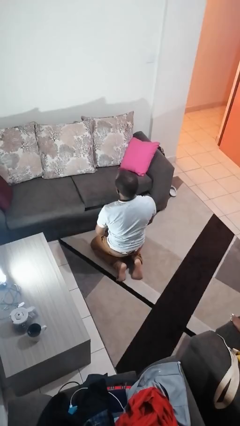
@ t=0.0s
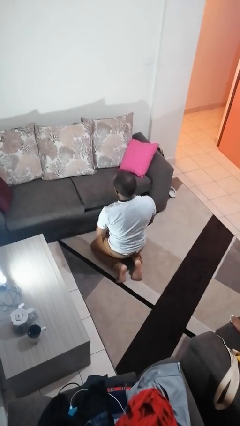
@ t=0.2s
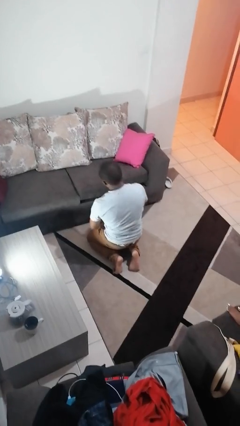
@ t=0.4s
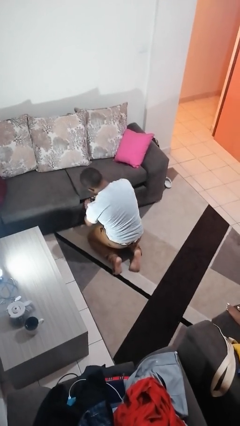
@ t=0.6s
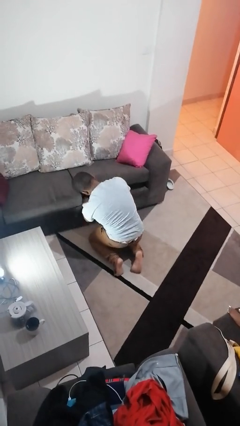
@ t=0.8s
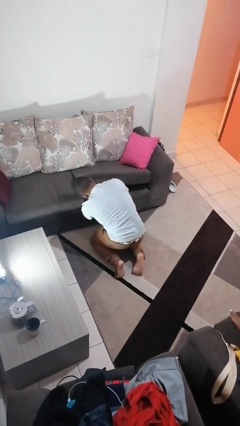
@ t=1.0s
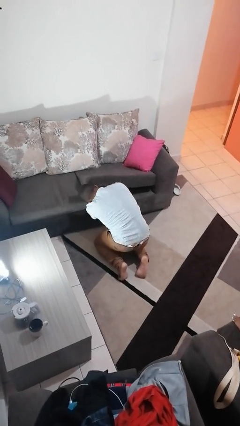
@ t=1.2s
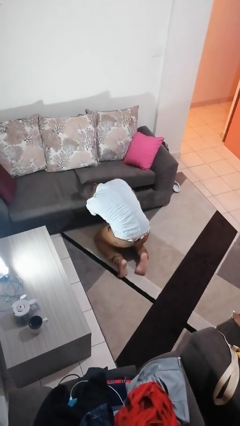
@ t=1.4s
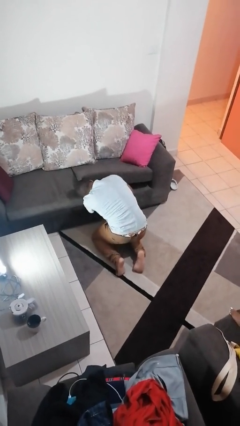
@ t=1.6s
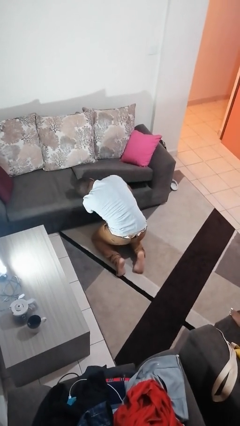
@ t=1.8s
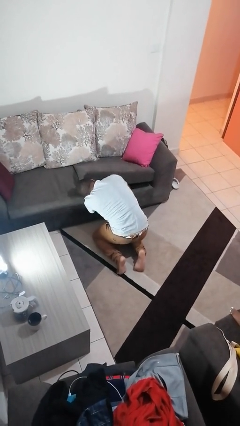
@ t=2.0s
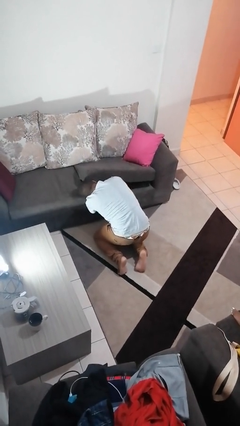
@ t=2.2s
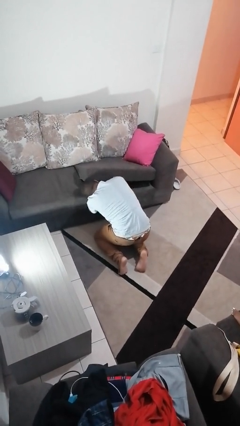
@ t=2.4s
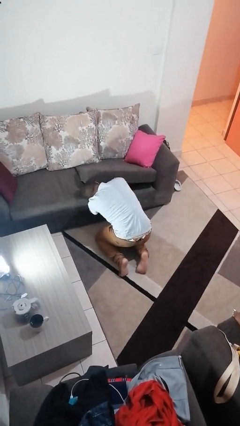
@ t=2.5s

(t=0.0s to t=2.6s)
person searches under couch

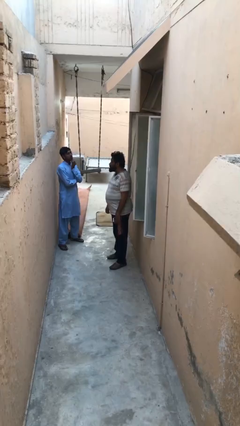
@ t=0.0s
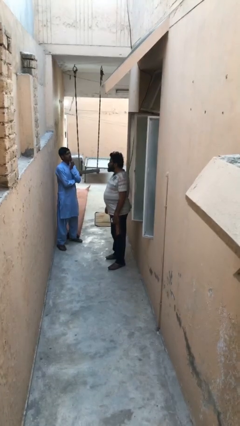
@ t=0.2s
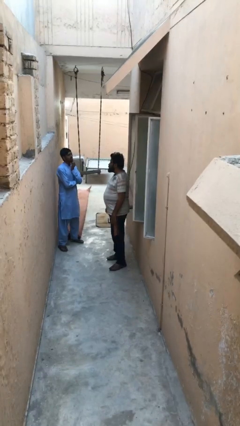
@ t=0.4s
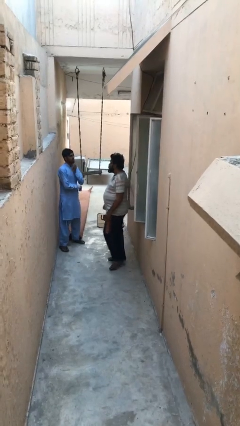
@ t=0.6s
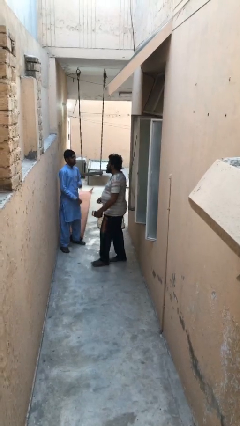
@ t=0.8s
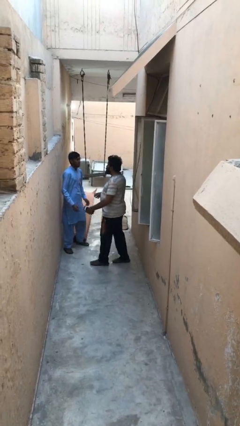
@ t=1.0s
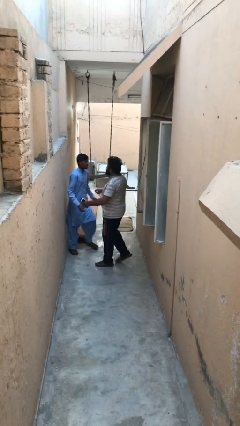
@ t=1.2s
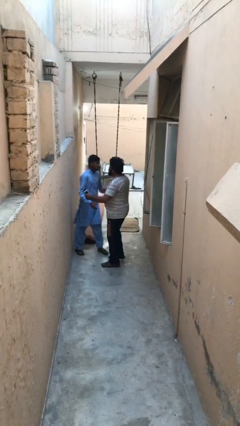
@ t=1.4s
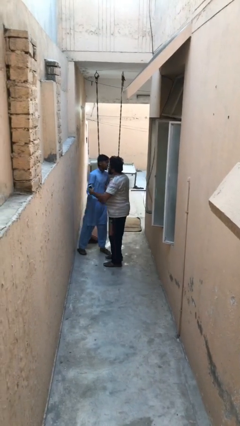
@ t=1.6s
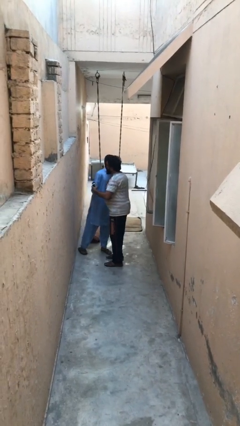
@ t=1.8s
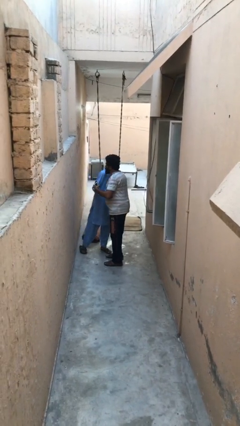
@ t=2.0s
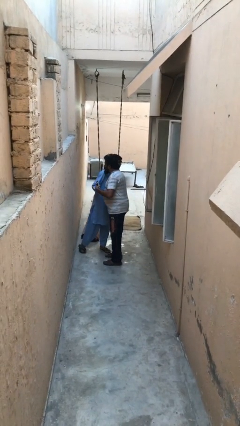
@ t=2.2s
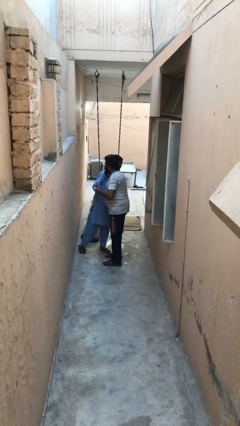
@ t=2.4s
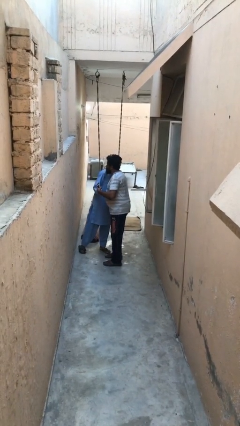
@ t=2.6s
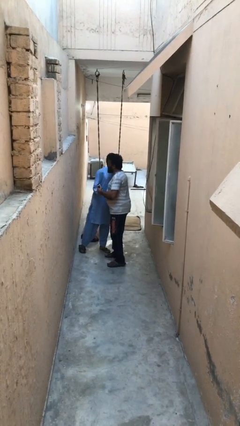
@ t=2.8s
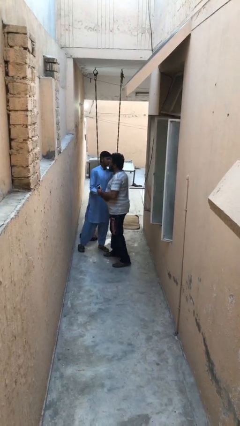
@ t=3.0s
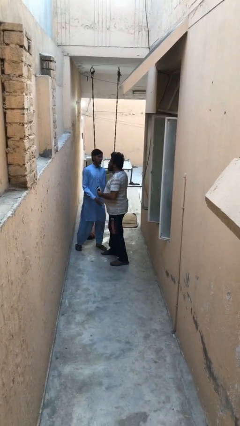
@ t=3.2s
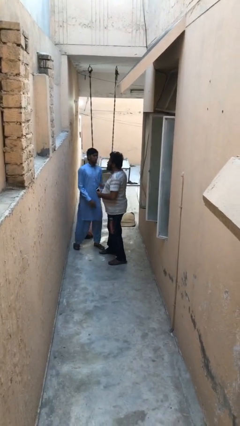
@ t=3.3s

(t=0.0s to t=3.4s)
person embraces person

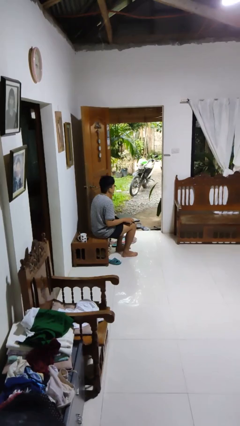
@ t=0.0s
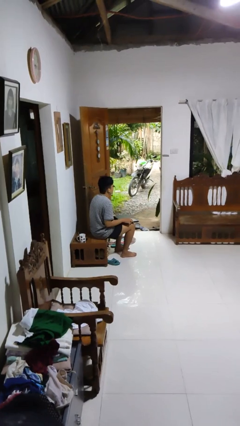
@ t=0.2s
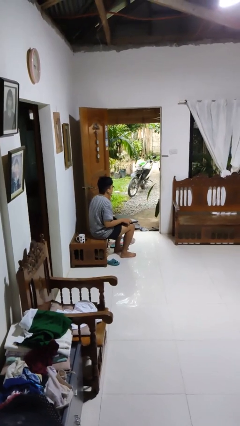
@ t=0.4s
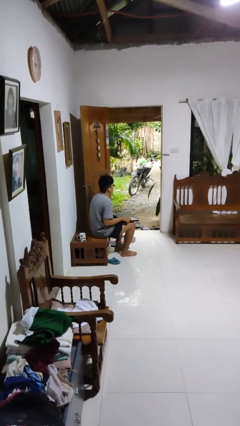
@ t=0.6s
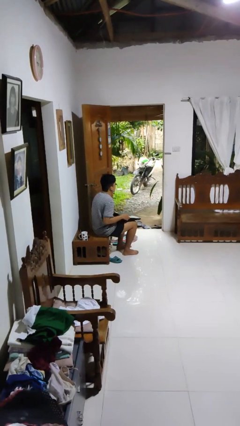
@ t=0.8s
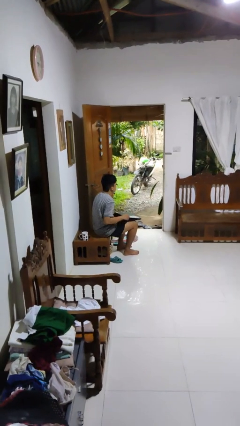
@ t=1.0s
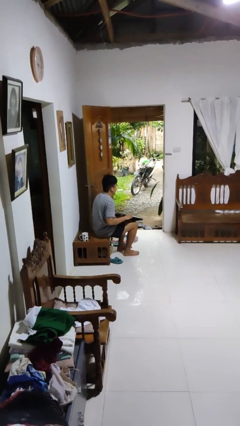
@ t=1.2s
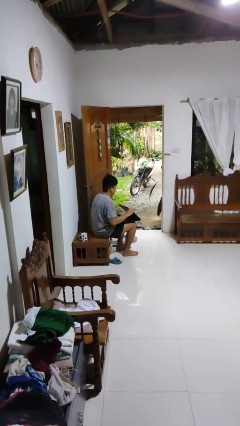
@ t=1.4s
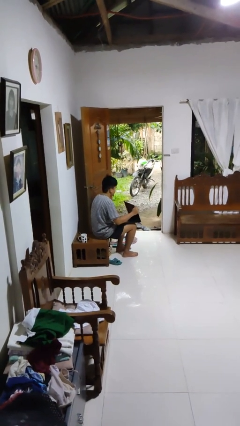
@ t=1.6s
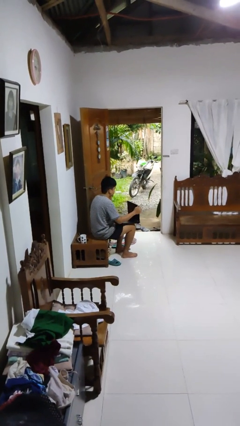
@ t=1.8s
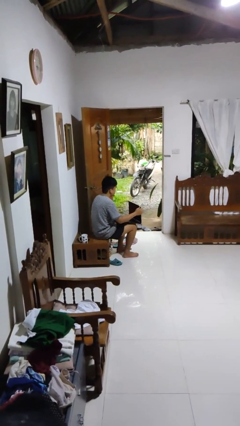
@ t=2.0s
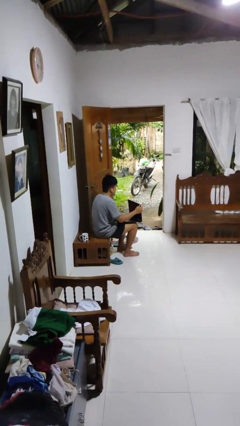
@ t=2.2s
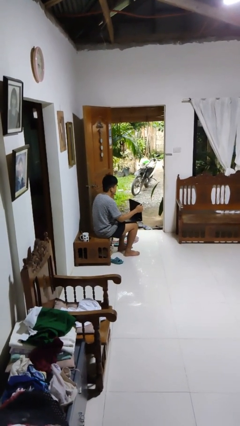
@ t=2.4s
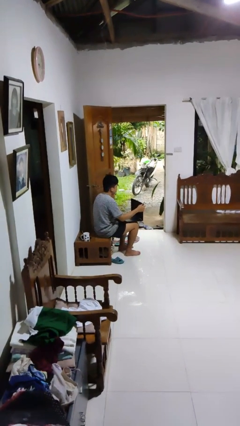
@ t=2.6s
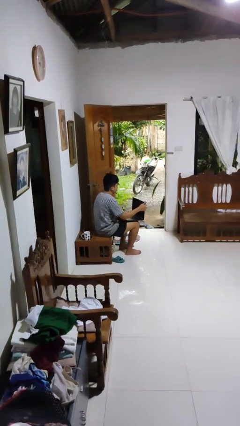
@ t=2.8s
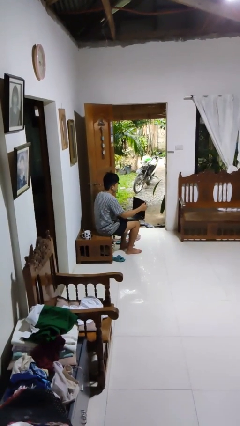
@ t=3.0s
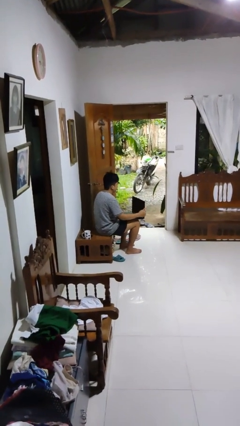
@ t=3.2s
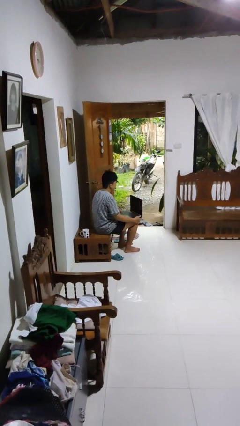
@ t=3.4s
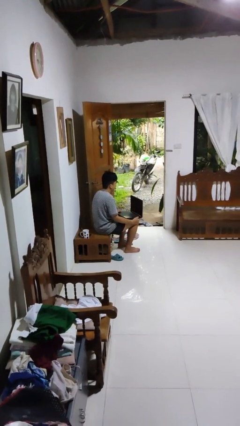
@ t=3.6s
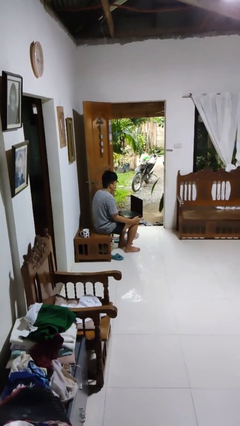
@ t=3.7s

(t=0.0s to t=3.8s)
person opens laptop

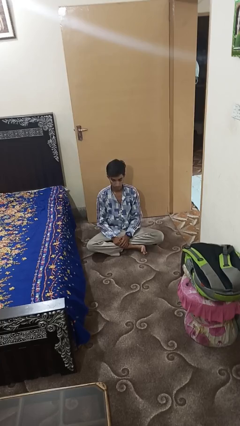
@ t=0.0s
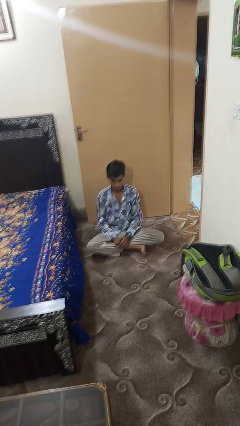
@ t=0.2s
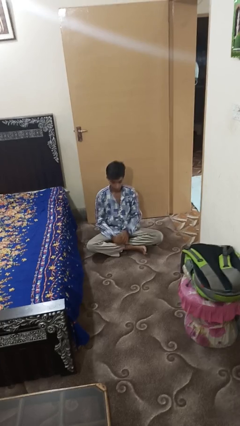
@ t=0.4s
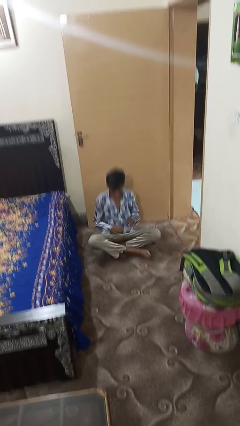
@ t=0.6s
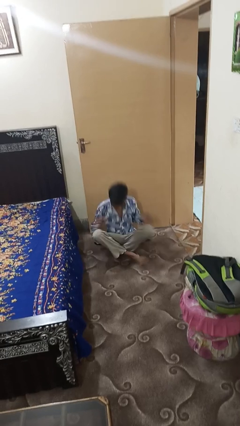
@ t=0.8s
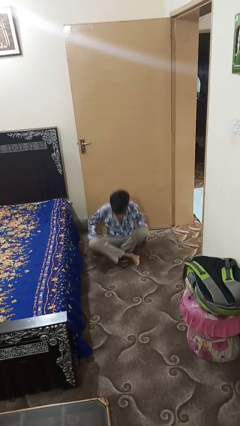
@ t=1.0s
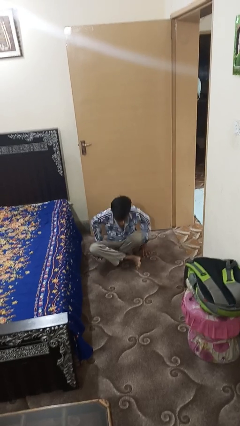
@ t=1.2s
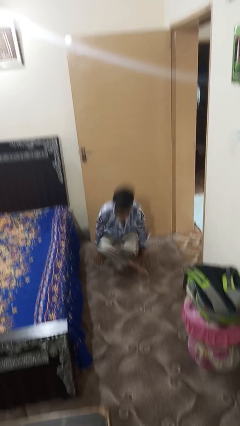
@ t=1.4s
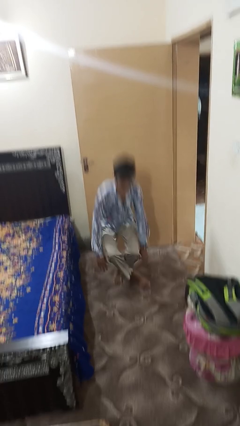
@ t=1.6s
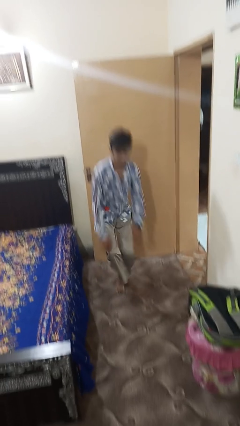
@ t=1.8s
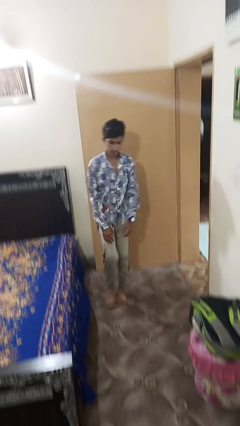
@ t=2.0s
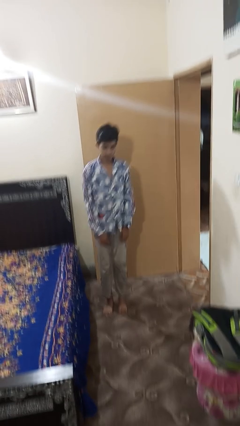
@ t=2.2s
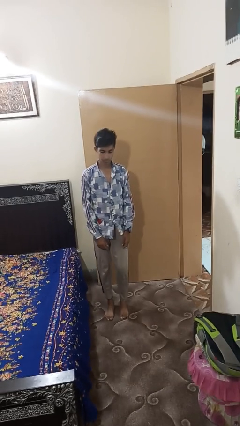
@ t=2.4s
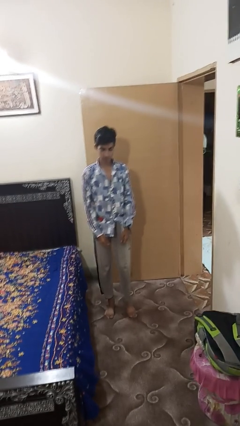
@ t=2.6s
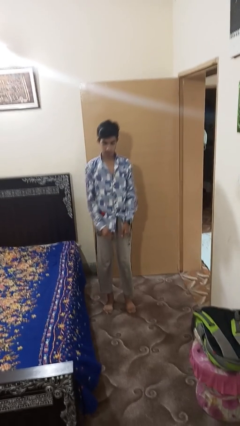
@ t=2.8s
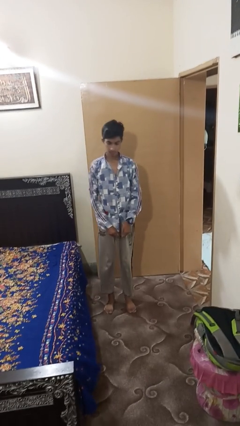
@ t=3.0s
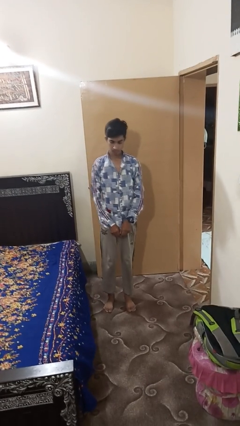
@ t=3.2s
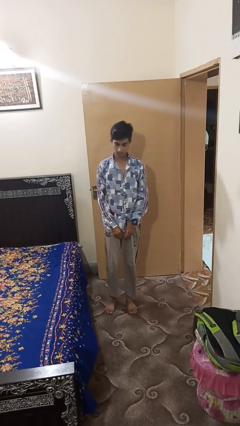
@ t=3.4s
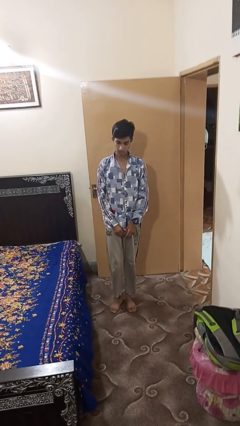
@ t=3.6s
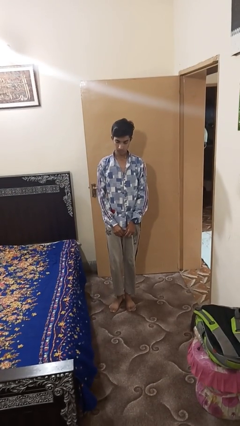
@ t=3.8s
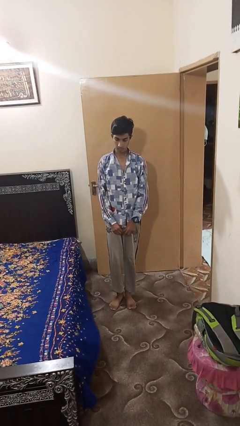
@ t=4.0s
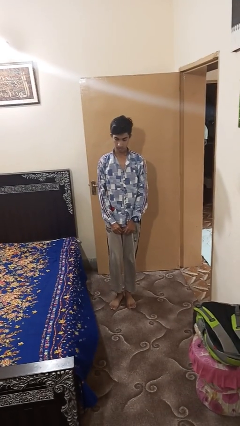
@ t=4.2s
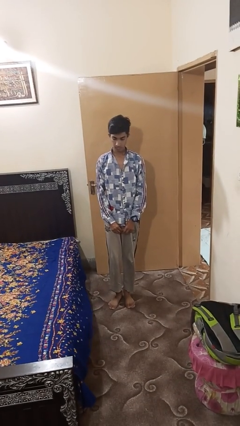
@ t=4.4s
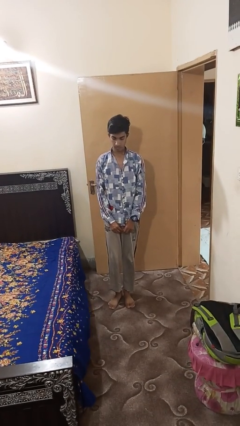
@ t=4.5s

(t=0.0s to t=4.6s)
person stands up from floor

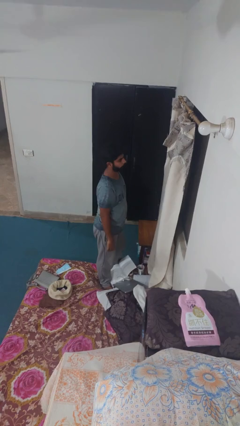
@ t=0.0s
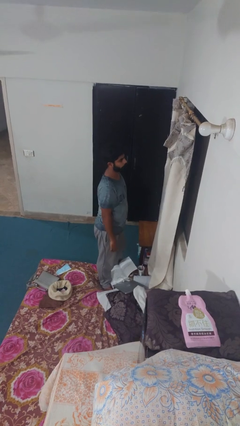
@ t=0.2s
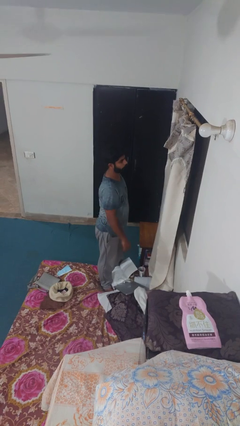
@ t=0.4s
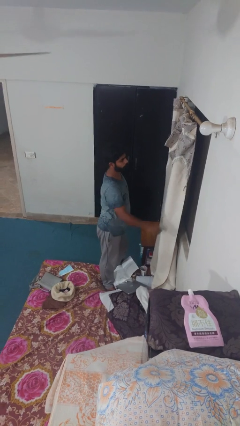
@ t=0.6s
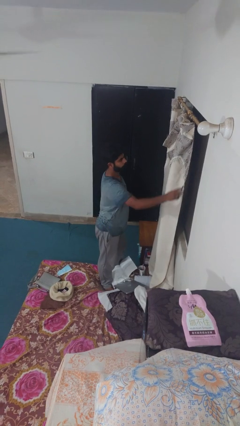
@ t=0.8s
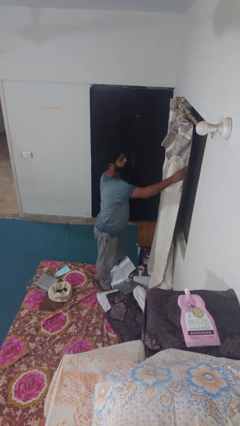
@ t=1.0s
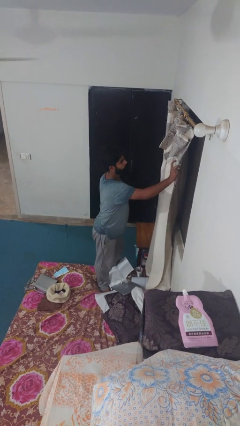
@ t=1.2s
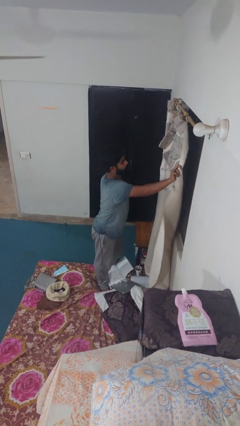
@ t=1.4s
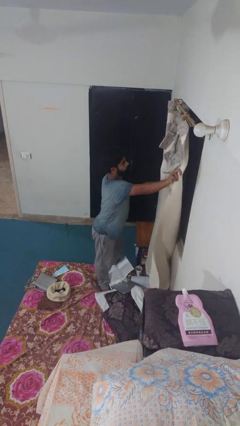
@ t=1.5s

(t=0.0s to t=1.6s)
person closes curtains

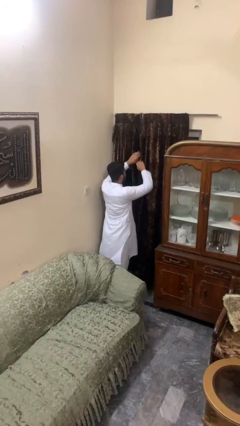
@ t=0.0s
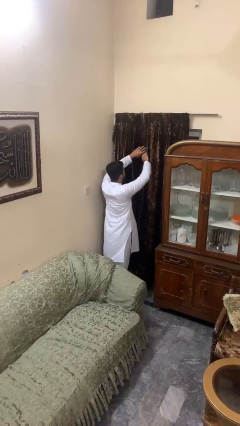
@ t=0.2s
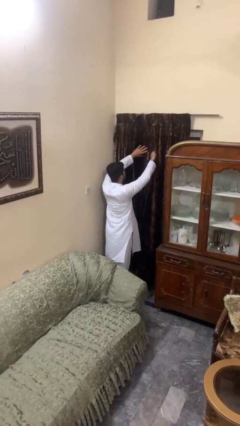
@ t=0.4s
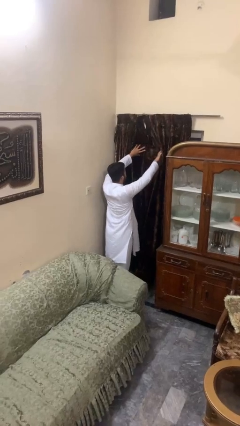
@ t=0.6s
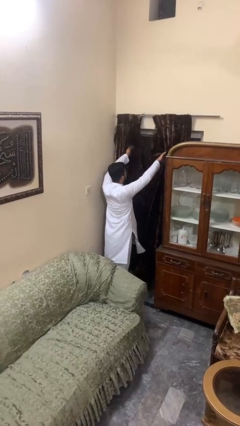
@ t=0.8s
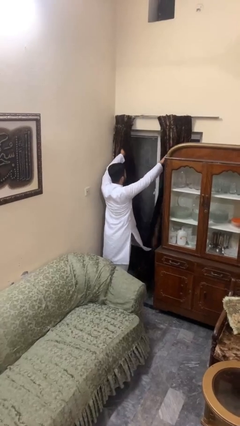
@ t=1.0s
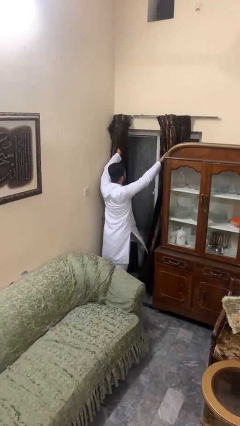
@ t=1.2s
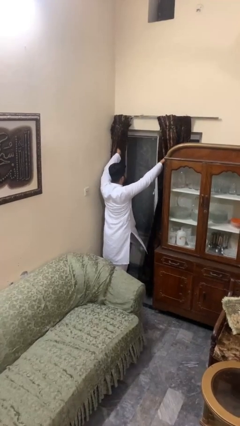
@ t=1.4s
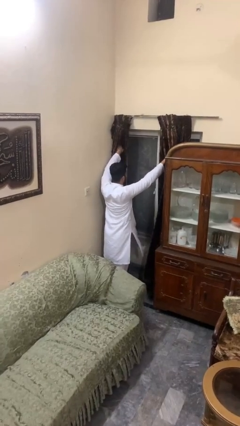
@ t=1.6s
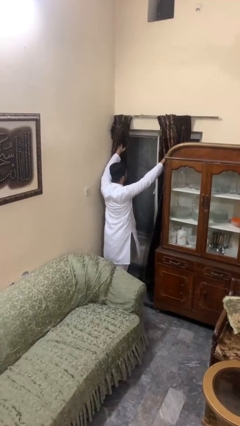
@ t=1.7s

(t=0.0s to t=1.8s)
person opens curtains
